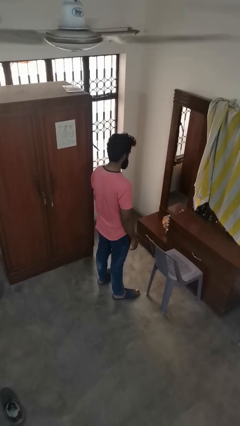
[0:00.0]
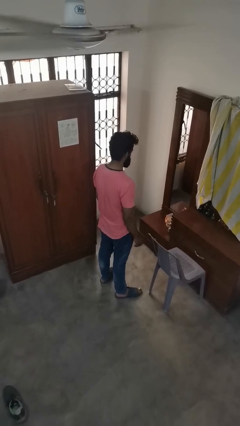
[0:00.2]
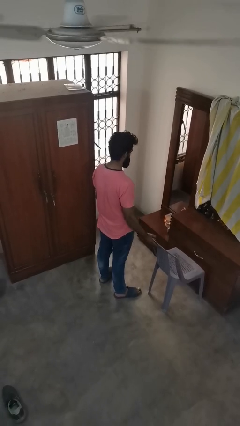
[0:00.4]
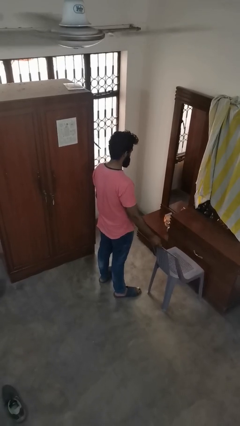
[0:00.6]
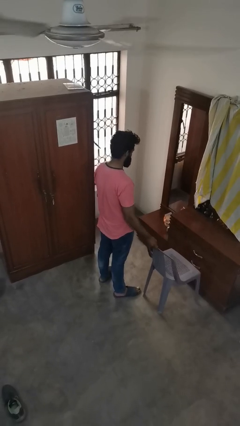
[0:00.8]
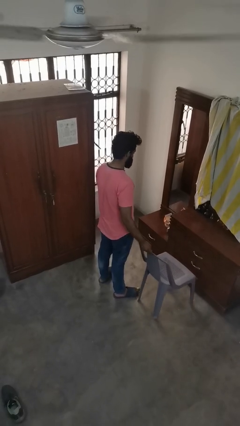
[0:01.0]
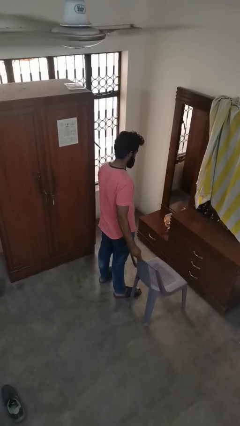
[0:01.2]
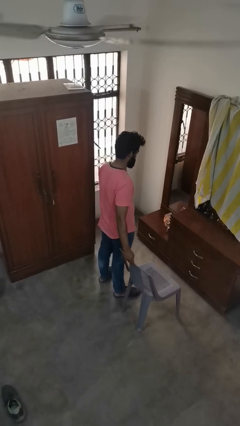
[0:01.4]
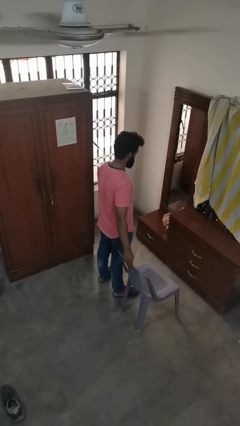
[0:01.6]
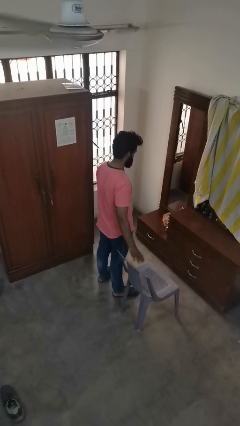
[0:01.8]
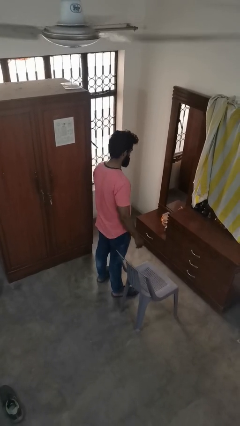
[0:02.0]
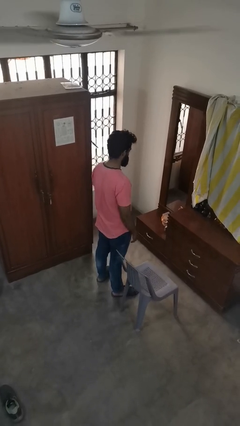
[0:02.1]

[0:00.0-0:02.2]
person pulls out chair

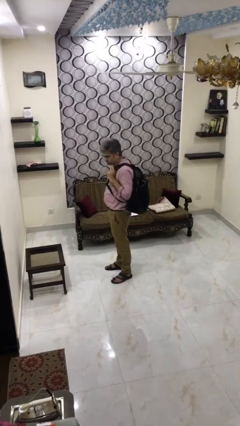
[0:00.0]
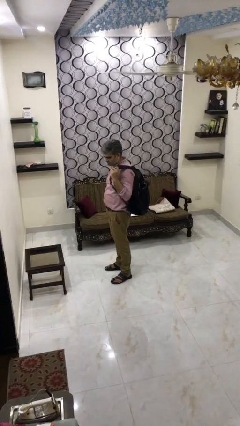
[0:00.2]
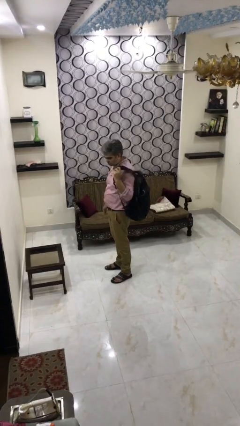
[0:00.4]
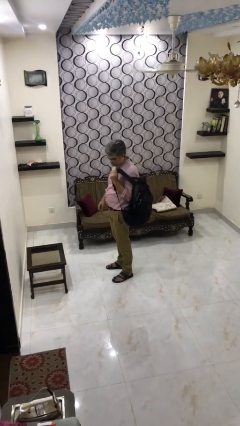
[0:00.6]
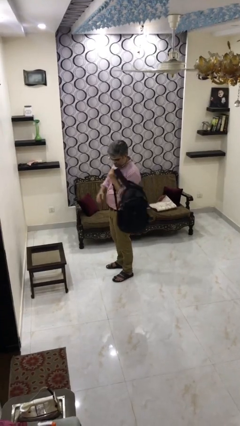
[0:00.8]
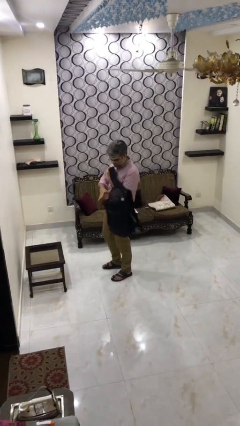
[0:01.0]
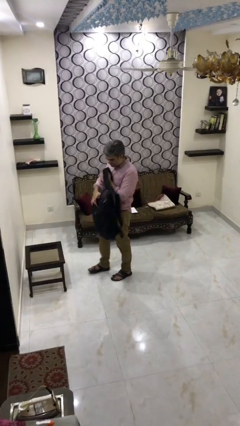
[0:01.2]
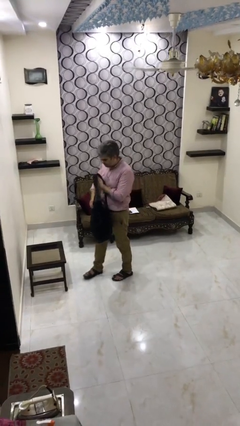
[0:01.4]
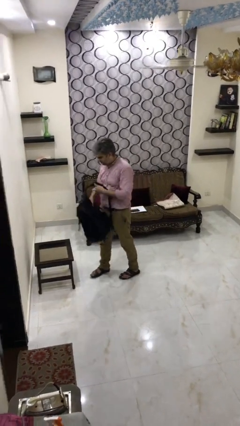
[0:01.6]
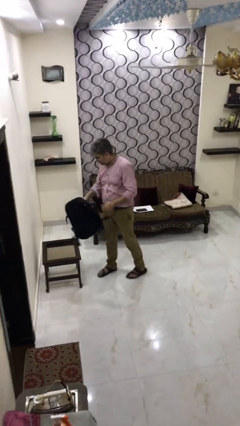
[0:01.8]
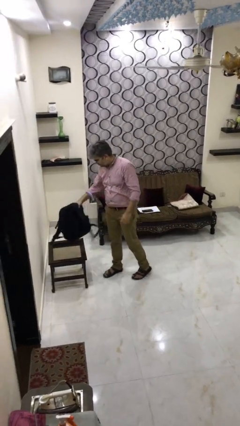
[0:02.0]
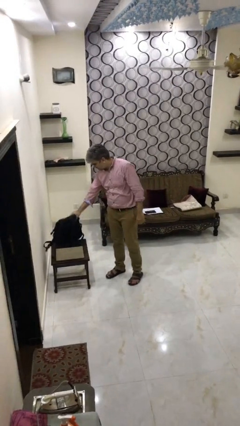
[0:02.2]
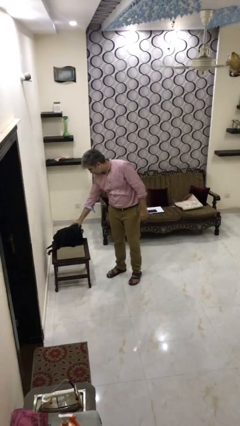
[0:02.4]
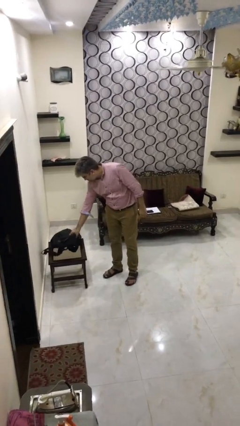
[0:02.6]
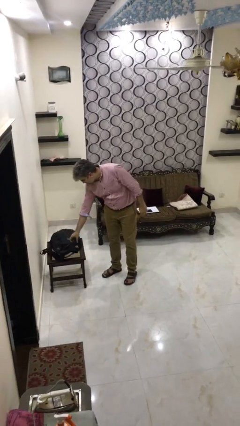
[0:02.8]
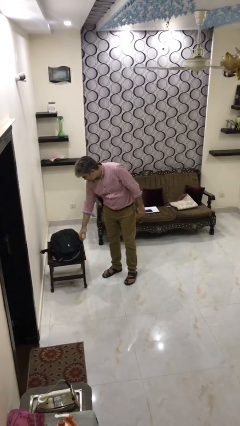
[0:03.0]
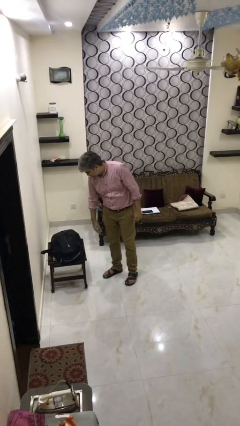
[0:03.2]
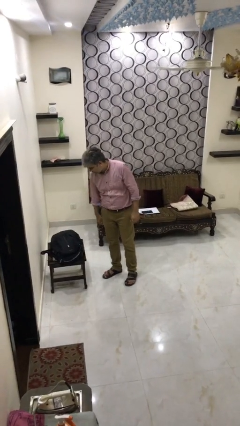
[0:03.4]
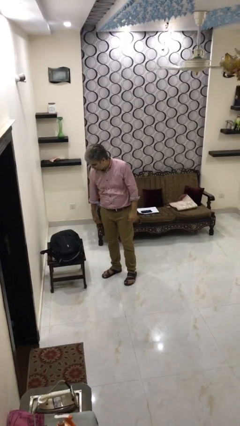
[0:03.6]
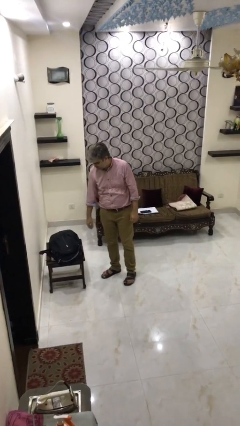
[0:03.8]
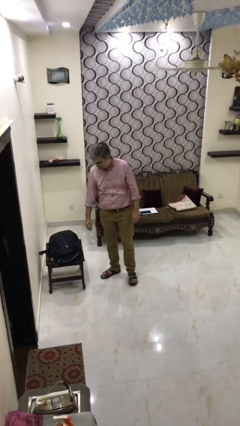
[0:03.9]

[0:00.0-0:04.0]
person puts down object on table

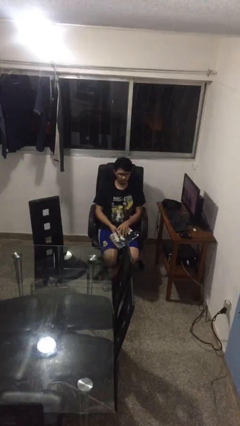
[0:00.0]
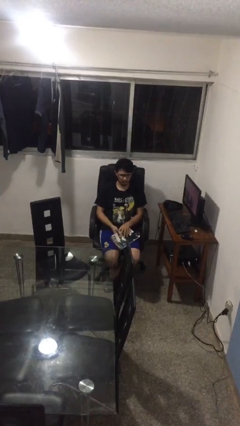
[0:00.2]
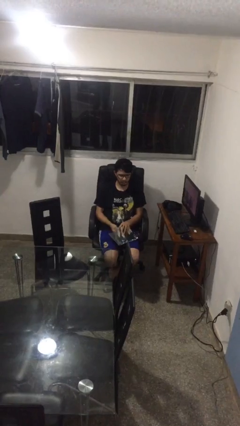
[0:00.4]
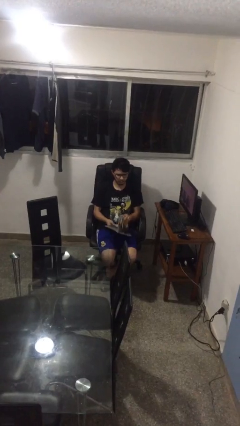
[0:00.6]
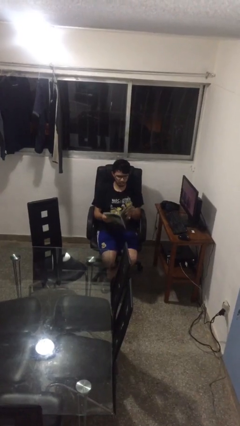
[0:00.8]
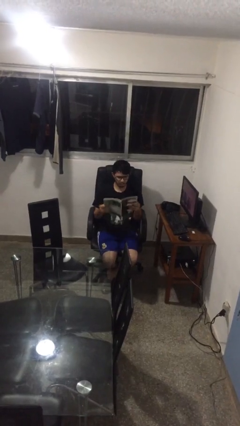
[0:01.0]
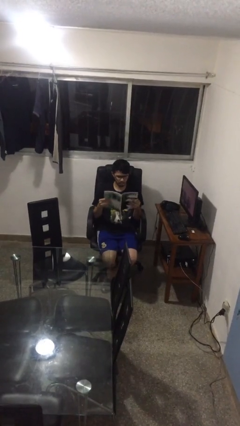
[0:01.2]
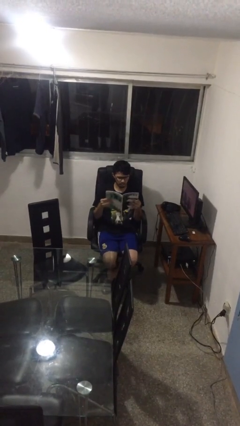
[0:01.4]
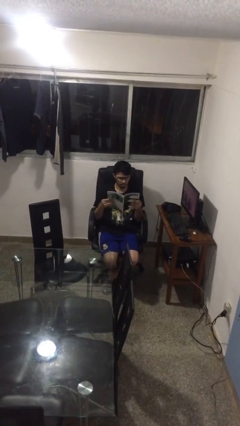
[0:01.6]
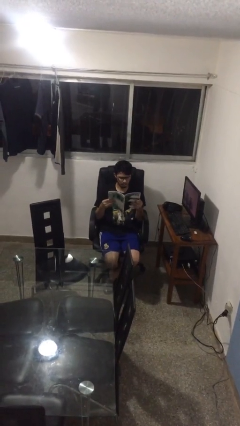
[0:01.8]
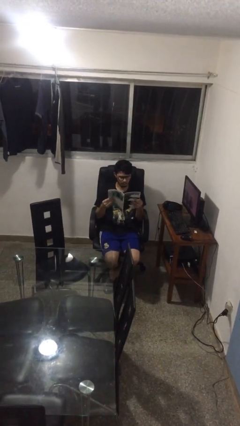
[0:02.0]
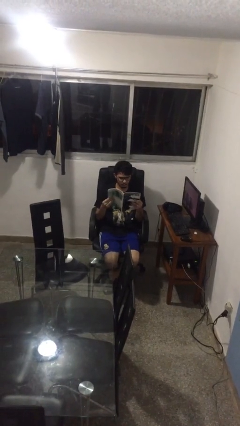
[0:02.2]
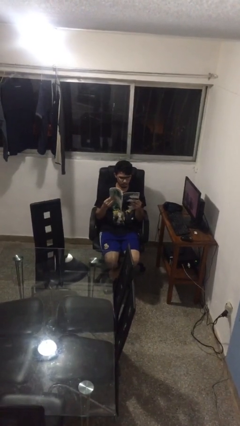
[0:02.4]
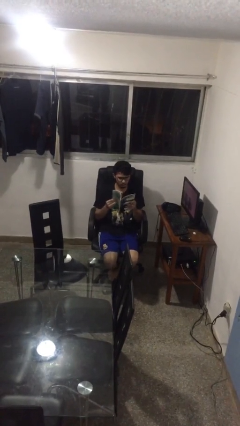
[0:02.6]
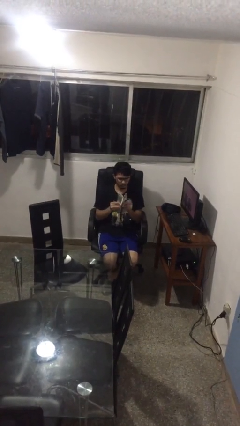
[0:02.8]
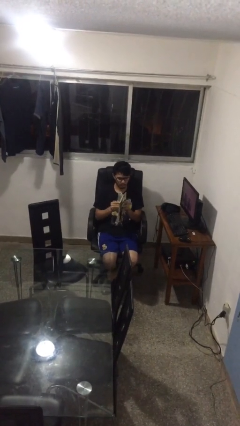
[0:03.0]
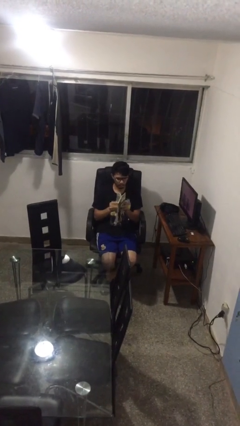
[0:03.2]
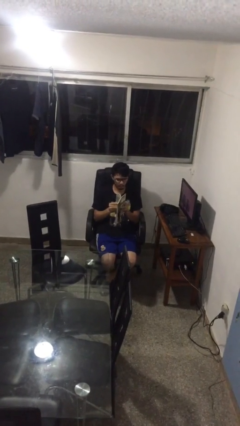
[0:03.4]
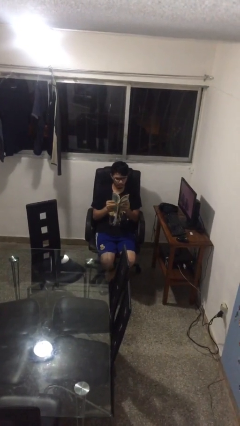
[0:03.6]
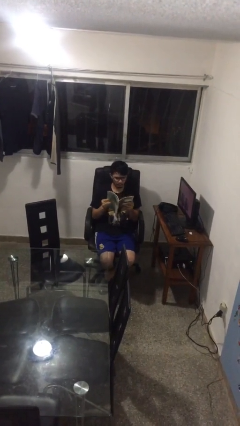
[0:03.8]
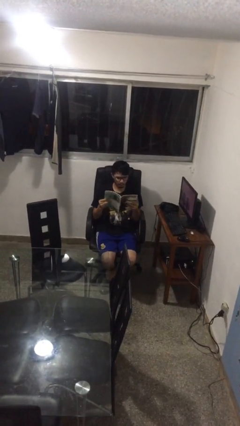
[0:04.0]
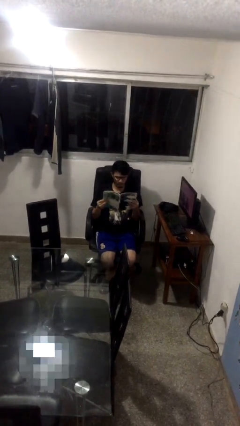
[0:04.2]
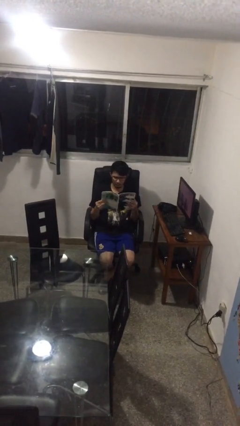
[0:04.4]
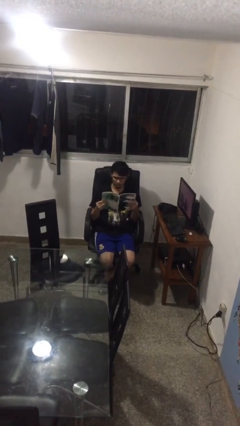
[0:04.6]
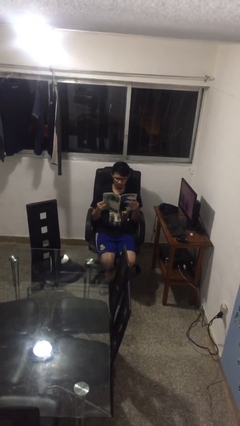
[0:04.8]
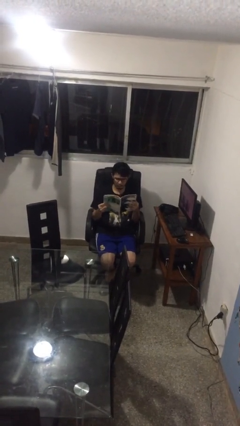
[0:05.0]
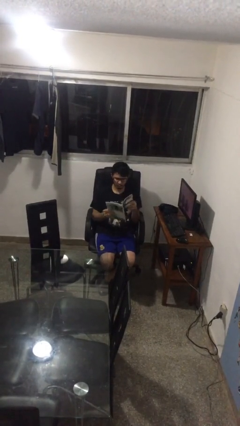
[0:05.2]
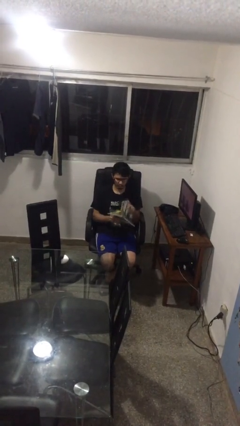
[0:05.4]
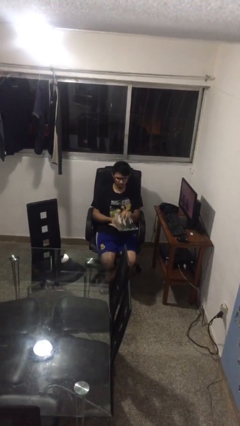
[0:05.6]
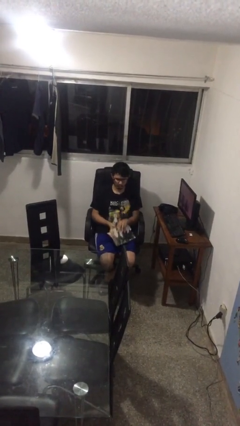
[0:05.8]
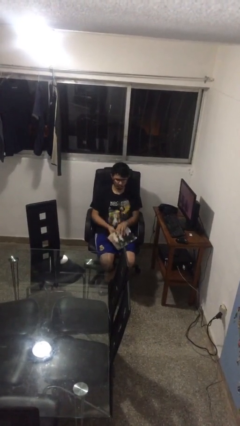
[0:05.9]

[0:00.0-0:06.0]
person reads magazine

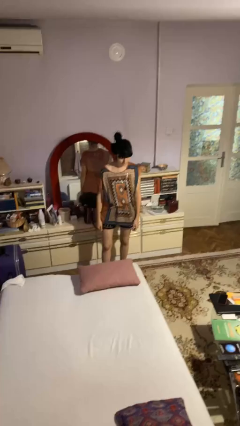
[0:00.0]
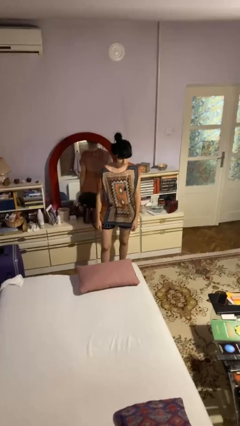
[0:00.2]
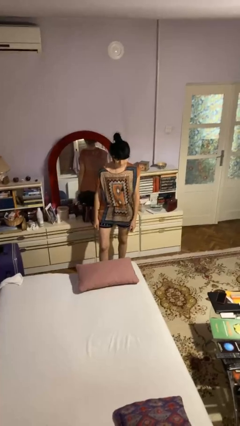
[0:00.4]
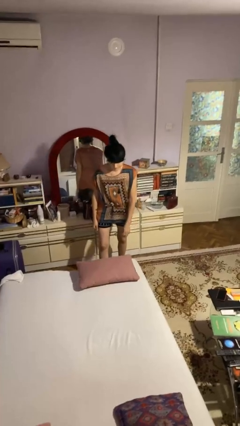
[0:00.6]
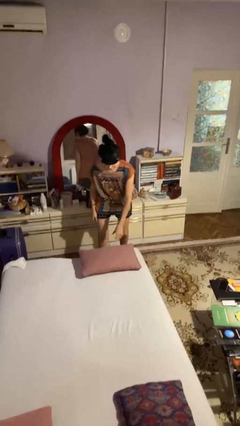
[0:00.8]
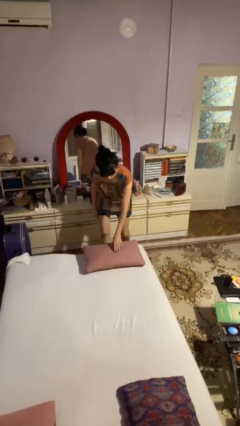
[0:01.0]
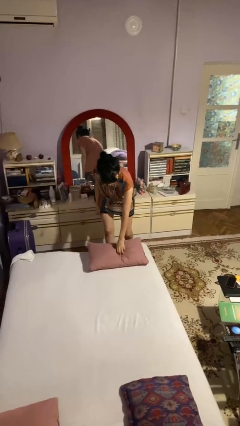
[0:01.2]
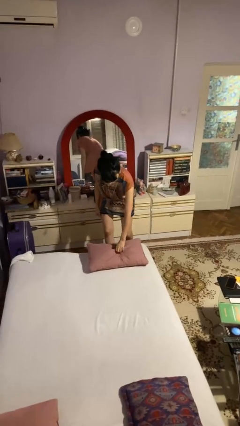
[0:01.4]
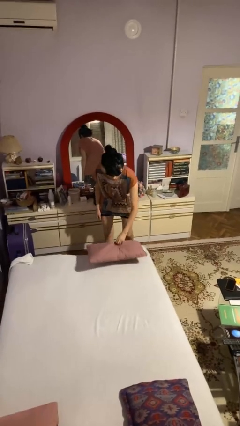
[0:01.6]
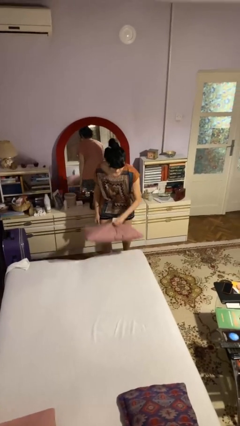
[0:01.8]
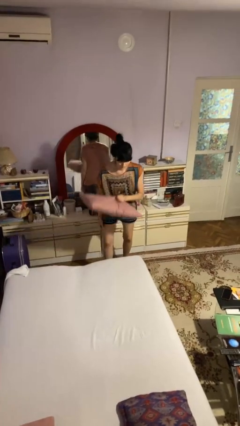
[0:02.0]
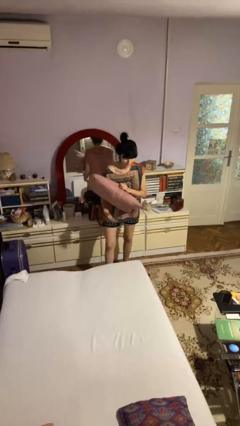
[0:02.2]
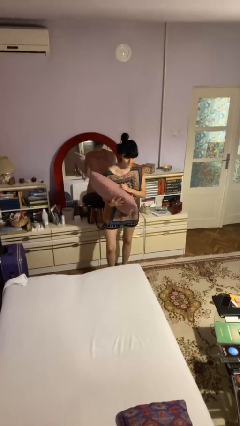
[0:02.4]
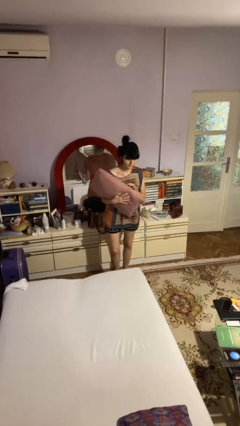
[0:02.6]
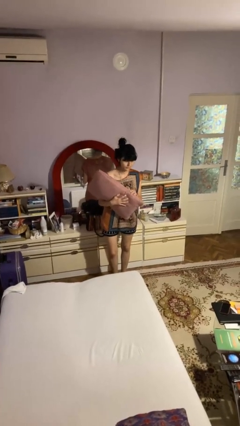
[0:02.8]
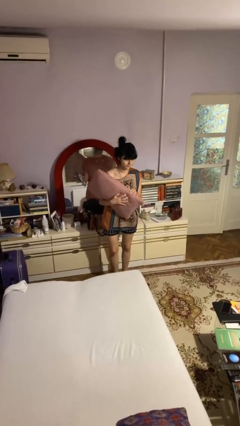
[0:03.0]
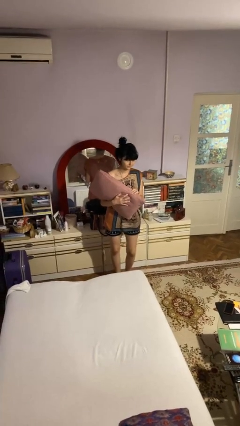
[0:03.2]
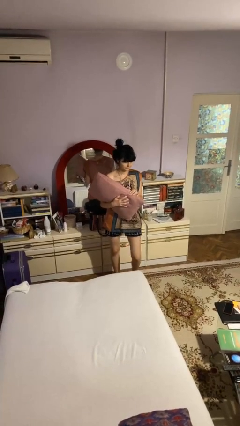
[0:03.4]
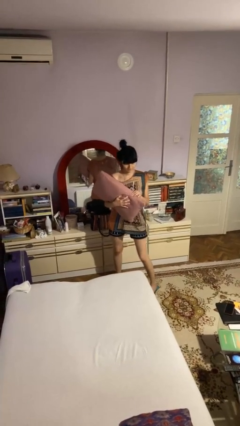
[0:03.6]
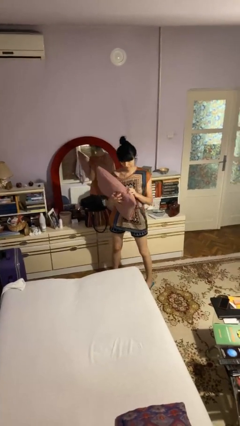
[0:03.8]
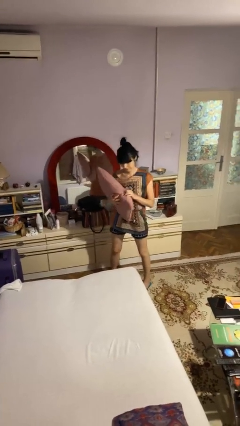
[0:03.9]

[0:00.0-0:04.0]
person picks up object from bed

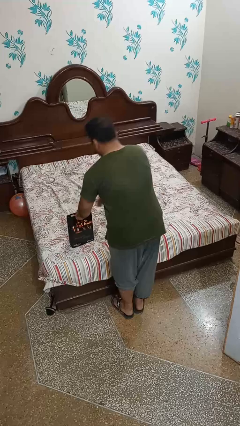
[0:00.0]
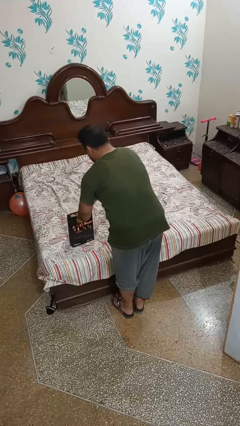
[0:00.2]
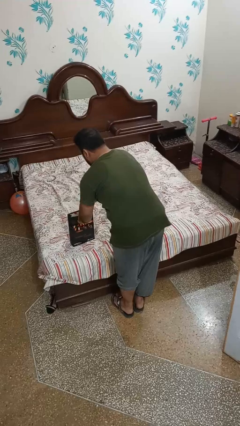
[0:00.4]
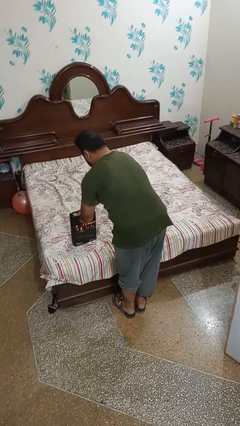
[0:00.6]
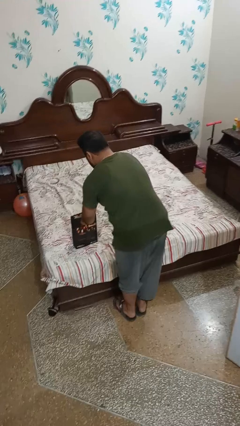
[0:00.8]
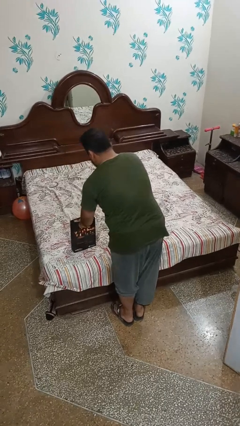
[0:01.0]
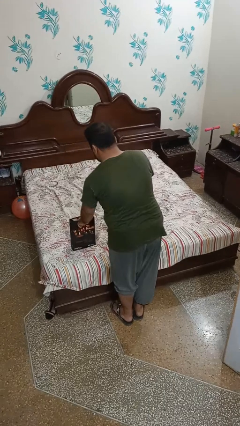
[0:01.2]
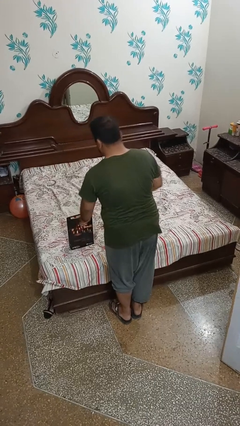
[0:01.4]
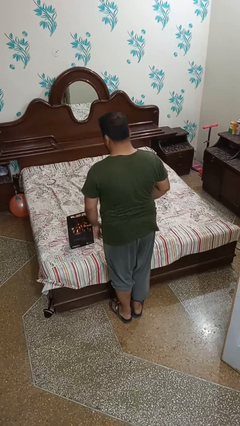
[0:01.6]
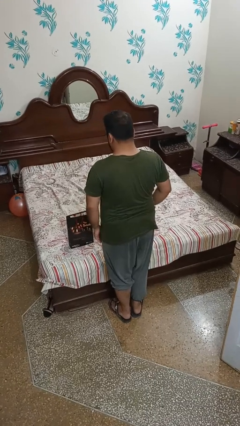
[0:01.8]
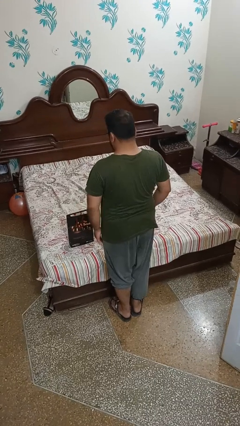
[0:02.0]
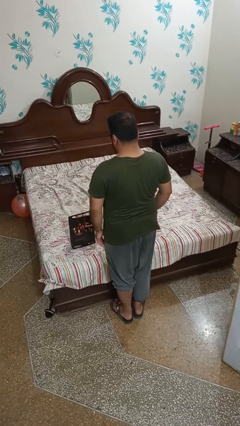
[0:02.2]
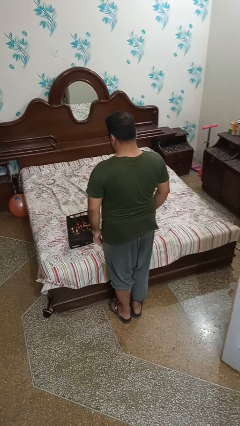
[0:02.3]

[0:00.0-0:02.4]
person takes object from bag
